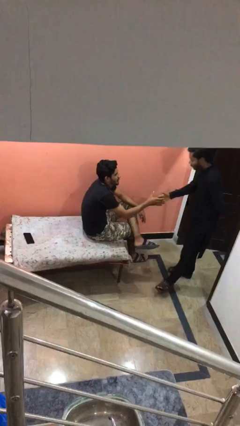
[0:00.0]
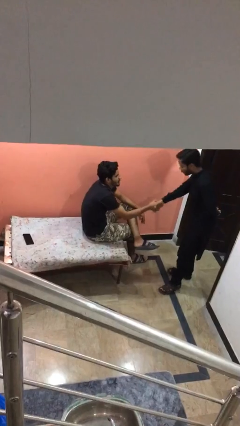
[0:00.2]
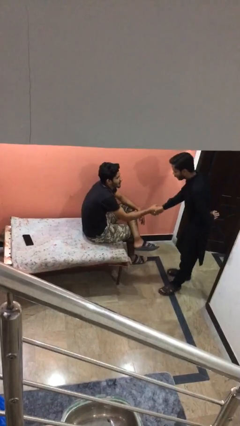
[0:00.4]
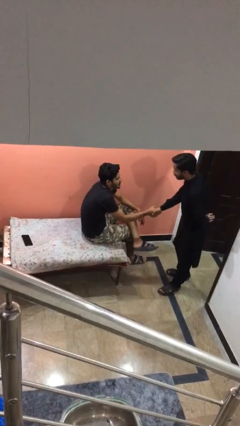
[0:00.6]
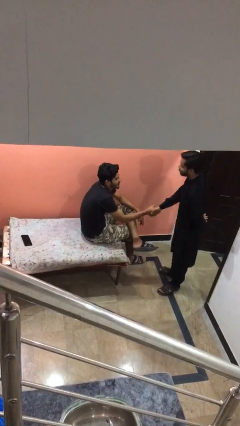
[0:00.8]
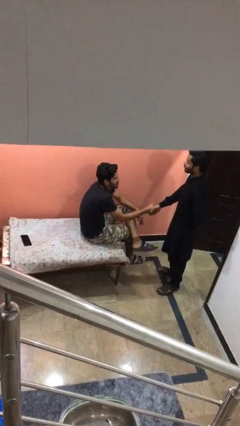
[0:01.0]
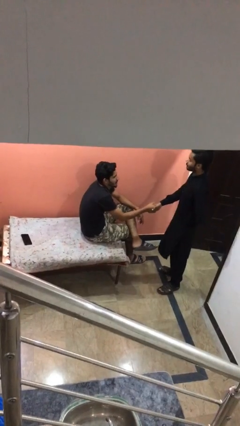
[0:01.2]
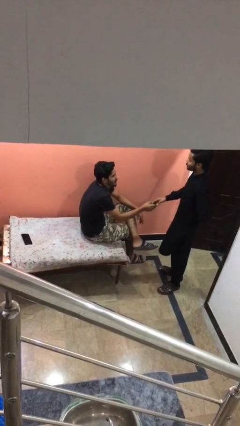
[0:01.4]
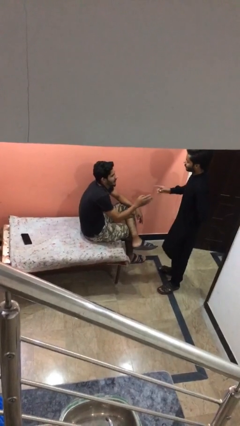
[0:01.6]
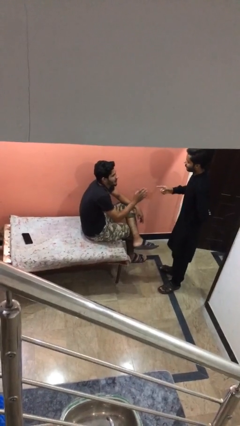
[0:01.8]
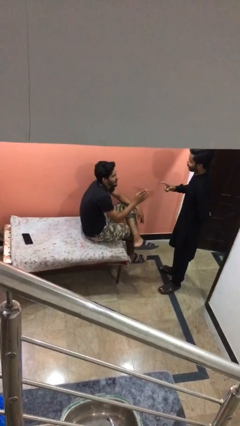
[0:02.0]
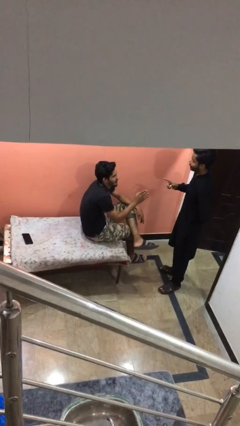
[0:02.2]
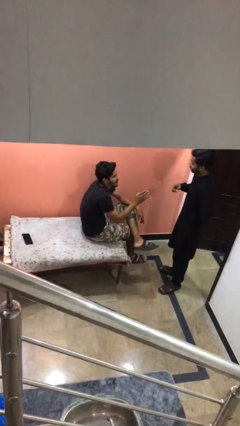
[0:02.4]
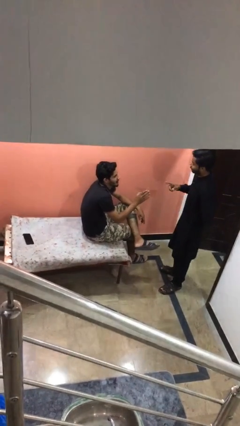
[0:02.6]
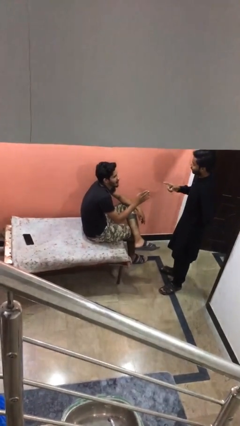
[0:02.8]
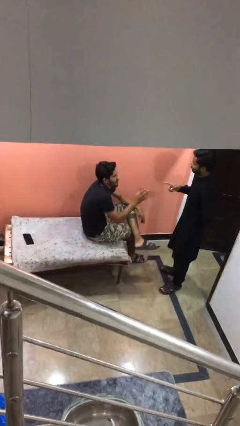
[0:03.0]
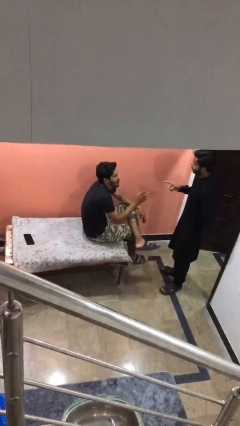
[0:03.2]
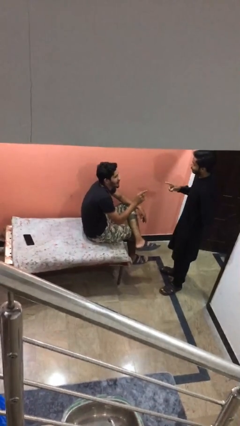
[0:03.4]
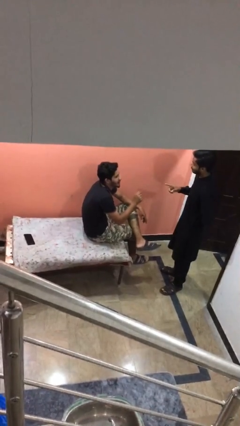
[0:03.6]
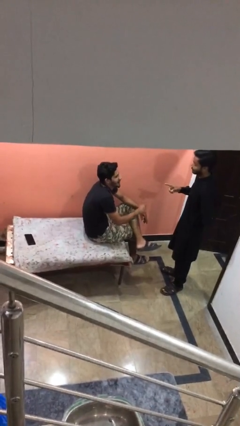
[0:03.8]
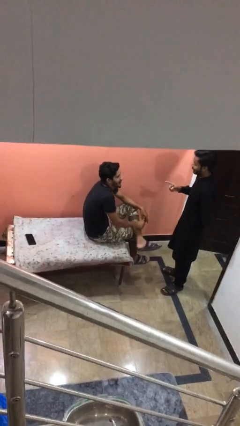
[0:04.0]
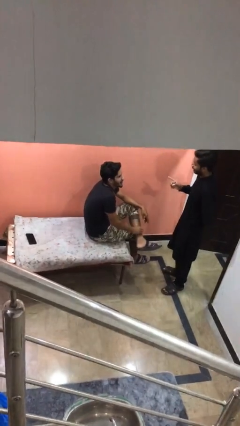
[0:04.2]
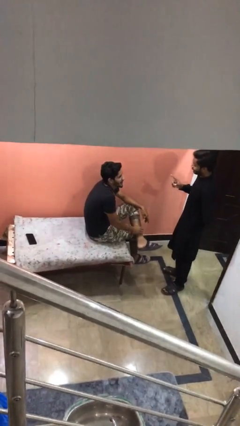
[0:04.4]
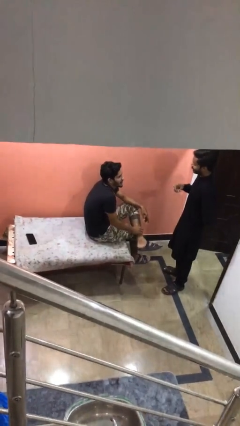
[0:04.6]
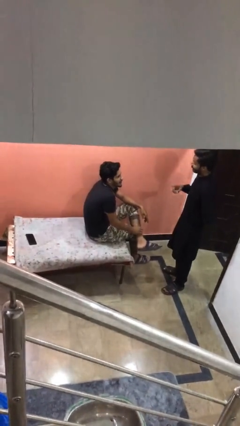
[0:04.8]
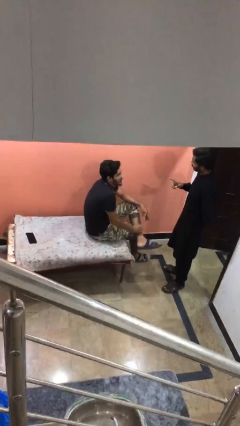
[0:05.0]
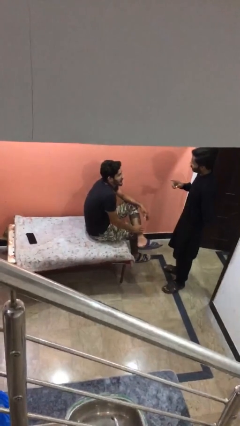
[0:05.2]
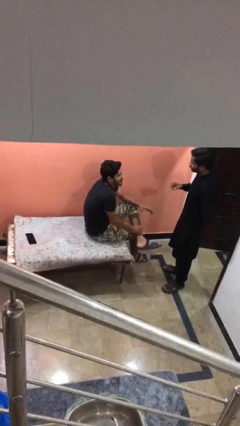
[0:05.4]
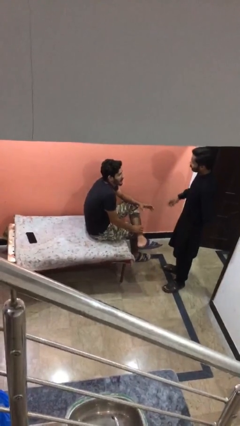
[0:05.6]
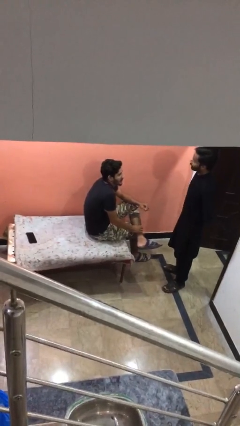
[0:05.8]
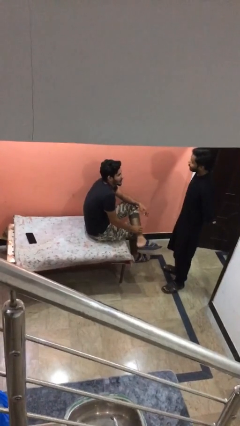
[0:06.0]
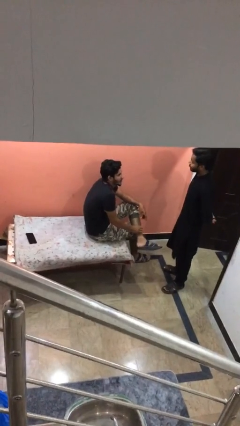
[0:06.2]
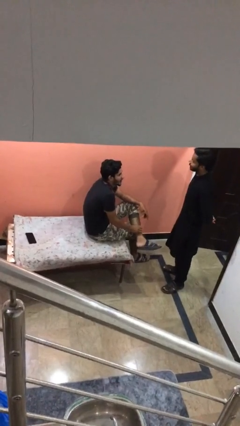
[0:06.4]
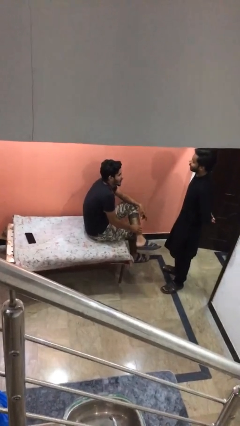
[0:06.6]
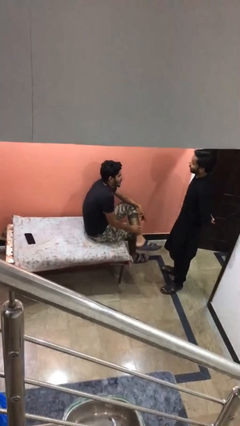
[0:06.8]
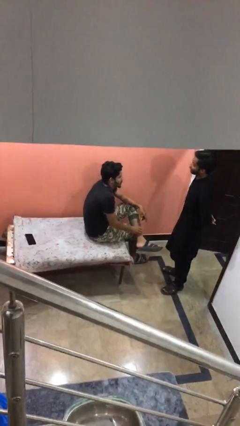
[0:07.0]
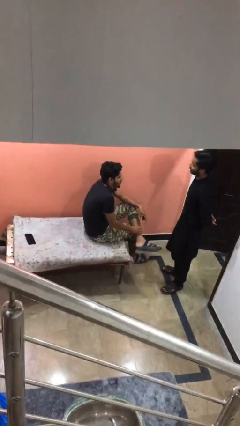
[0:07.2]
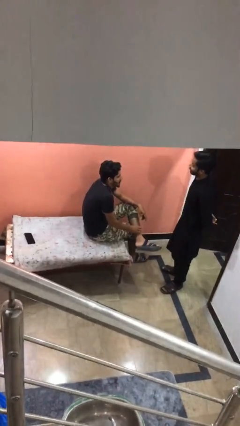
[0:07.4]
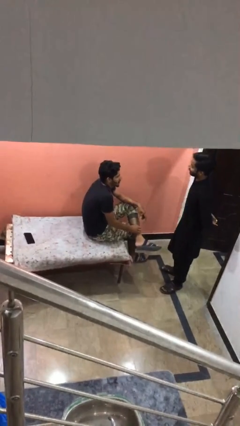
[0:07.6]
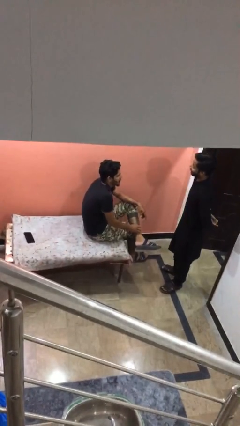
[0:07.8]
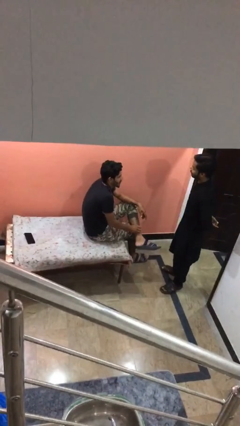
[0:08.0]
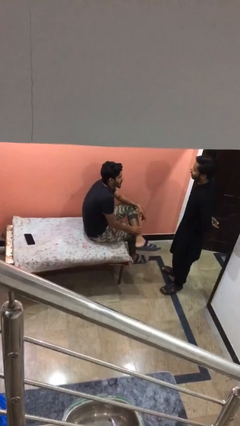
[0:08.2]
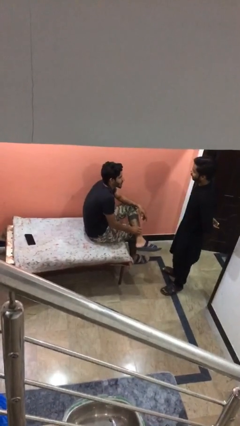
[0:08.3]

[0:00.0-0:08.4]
person shakes hand

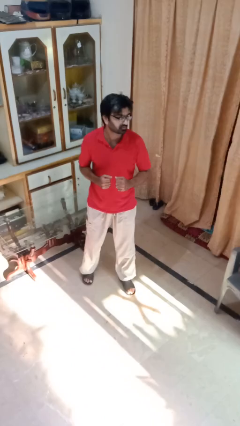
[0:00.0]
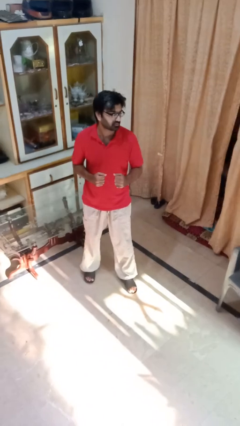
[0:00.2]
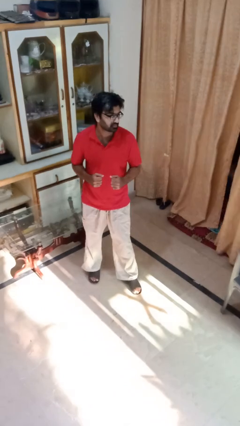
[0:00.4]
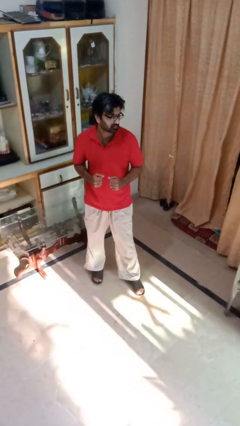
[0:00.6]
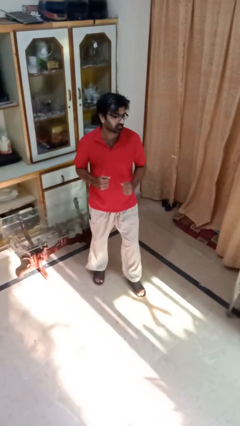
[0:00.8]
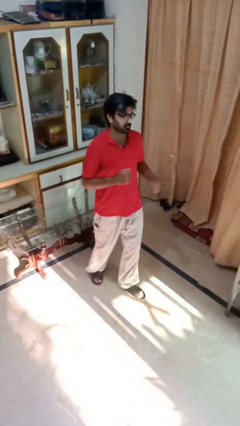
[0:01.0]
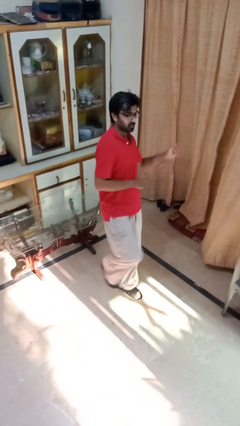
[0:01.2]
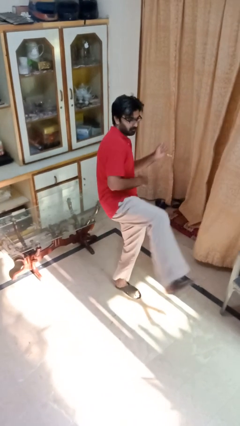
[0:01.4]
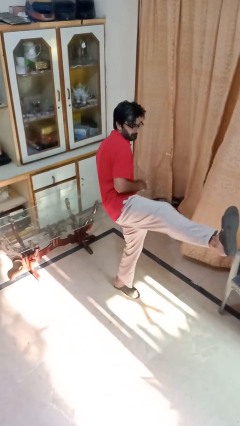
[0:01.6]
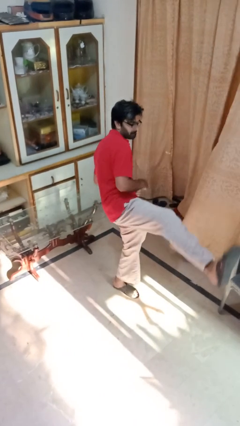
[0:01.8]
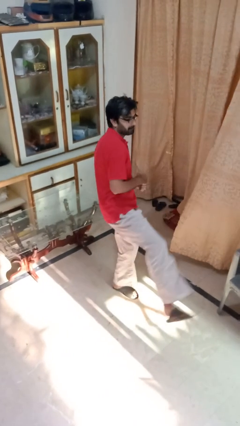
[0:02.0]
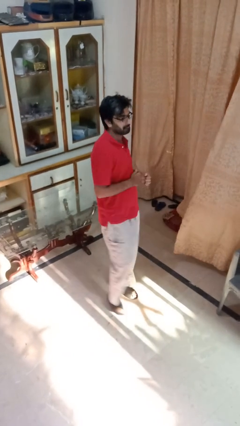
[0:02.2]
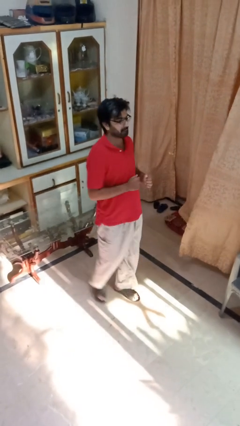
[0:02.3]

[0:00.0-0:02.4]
person karate kicks

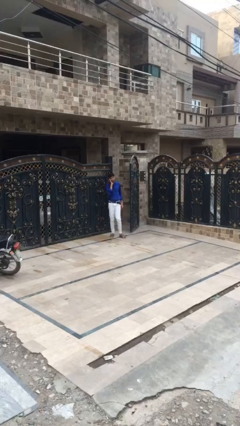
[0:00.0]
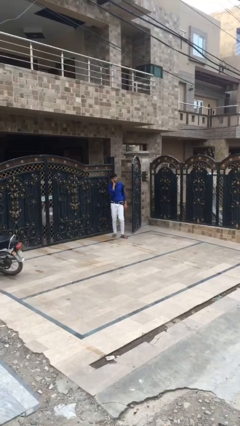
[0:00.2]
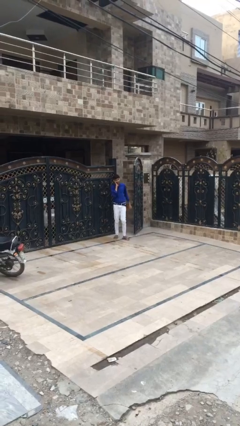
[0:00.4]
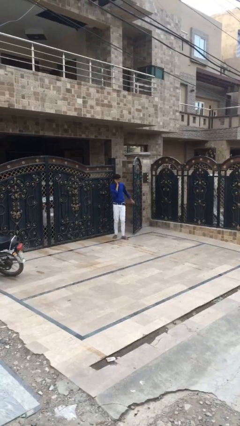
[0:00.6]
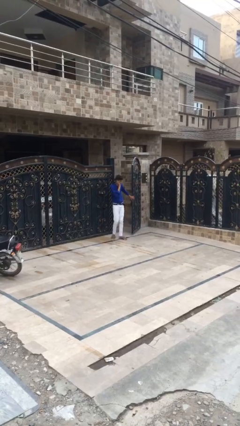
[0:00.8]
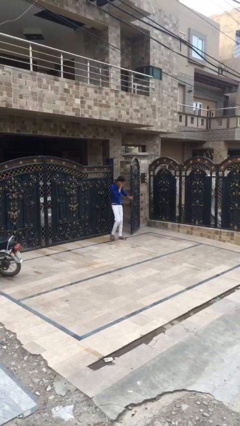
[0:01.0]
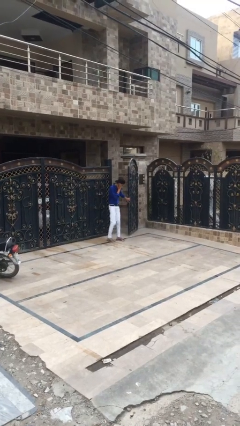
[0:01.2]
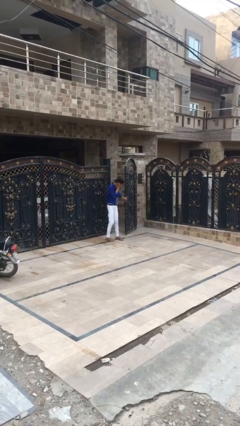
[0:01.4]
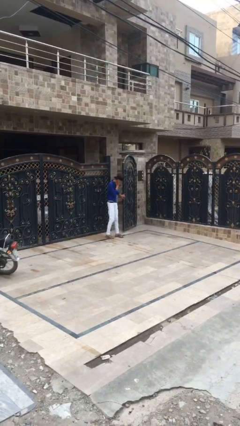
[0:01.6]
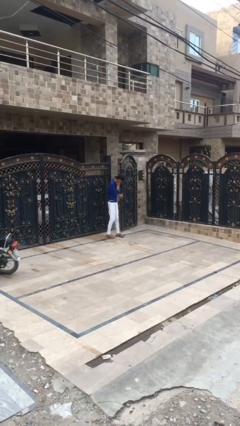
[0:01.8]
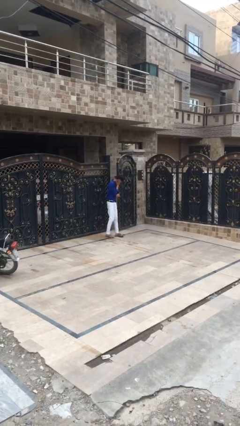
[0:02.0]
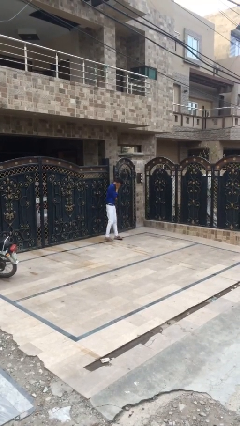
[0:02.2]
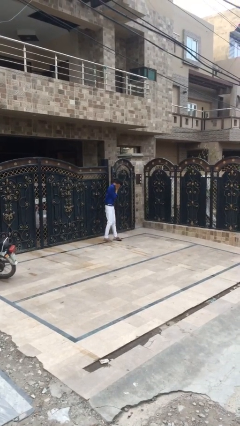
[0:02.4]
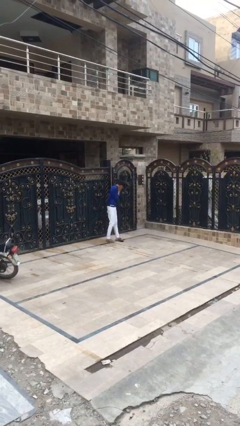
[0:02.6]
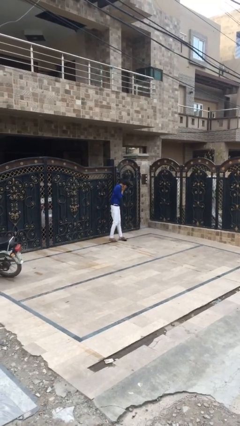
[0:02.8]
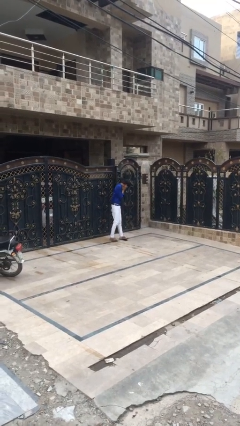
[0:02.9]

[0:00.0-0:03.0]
person closes facility door

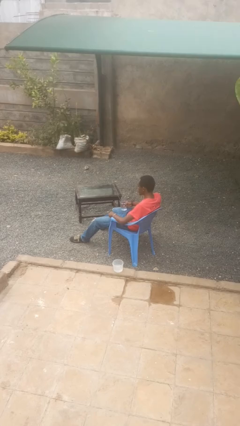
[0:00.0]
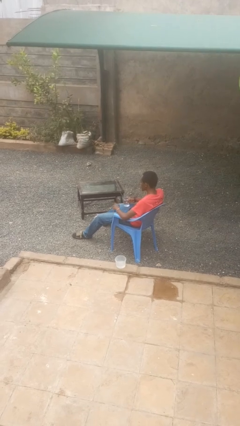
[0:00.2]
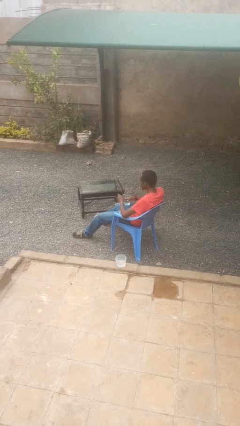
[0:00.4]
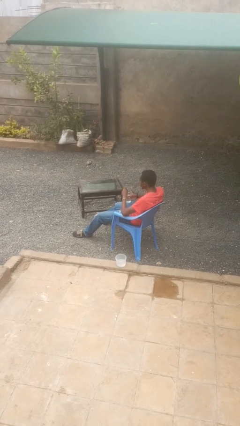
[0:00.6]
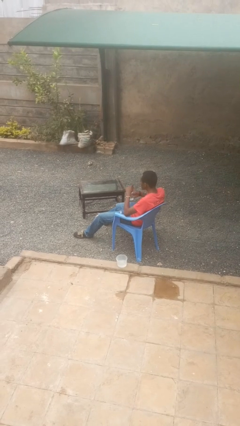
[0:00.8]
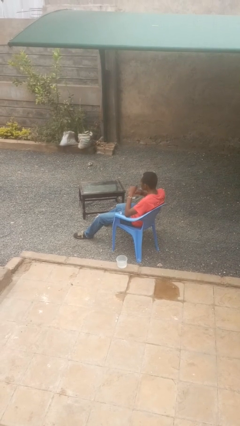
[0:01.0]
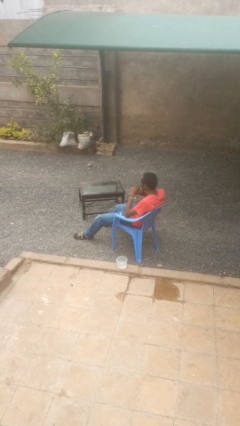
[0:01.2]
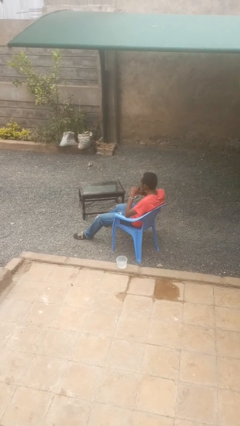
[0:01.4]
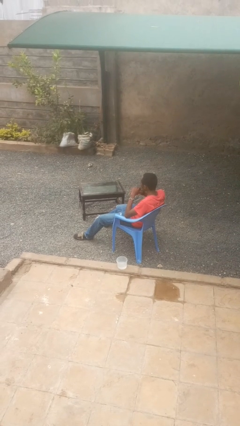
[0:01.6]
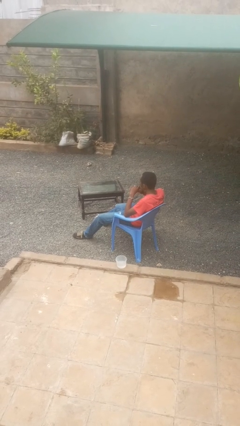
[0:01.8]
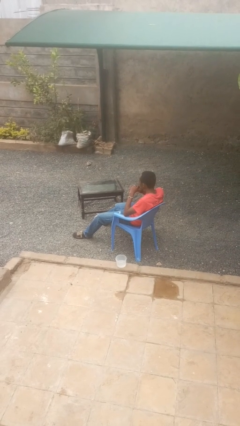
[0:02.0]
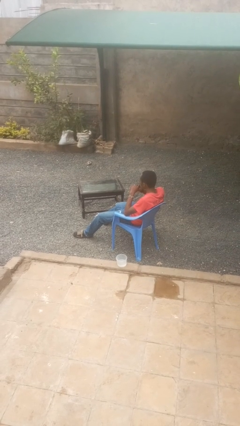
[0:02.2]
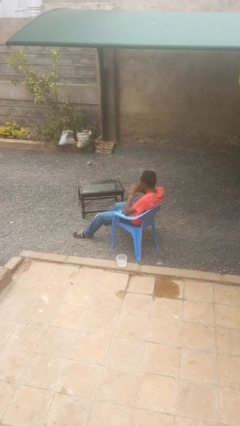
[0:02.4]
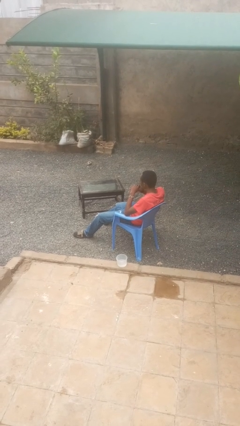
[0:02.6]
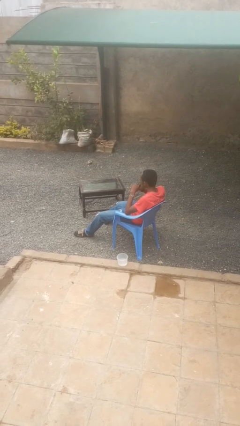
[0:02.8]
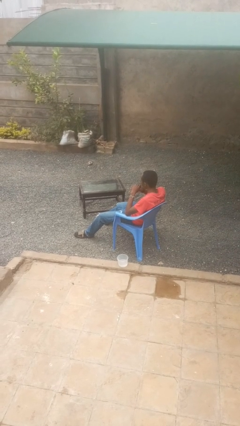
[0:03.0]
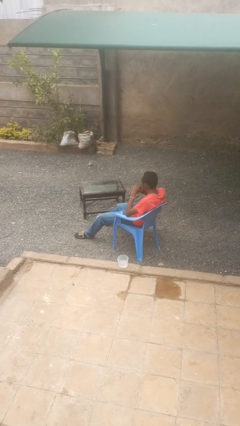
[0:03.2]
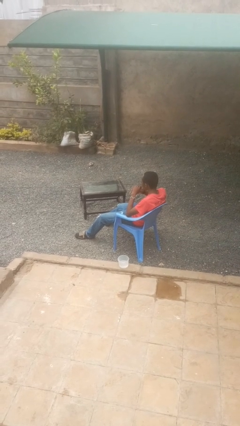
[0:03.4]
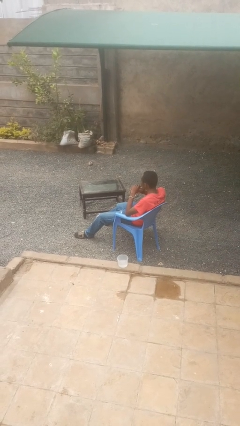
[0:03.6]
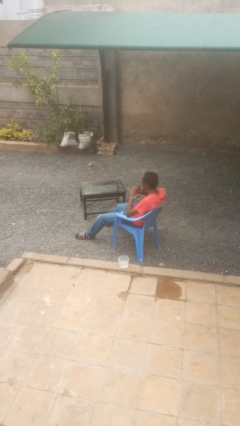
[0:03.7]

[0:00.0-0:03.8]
person drinks from straw

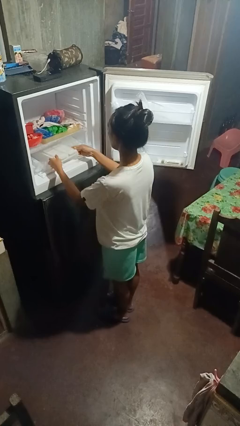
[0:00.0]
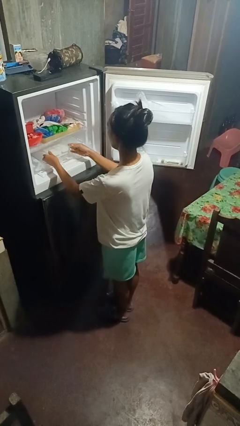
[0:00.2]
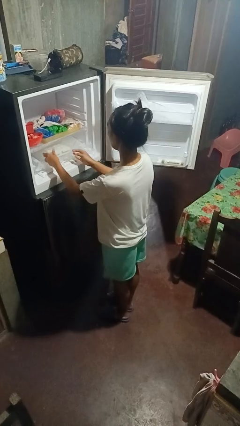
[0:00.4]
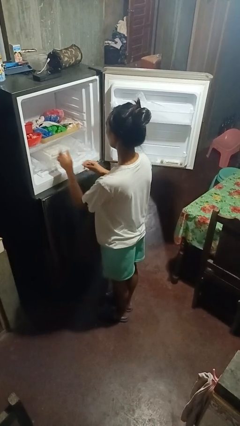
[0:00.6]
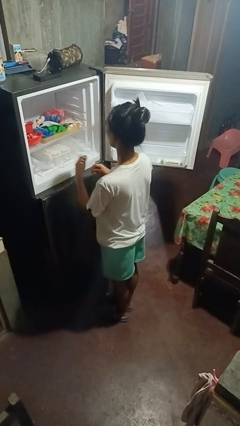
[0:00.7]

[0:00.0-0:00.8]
person puts object into refrigerator
